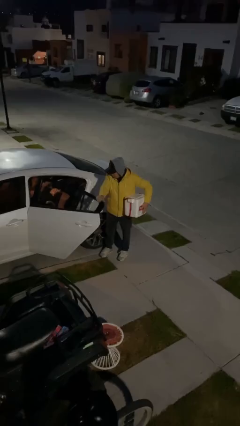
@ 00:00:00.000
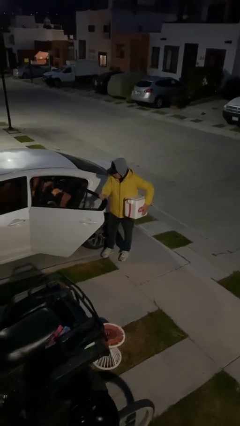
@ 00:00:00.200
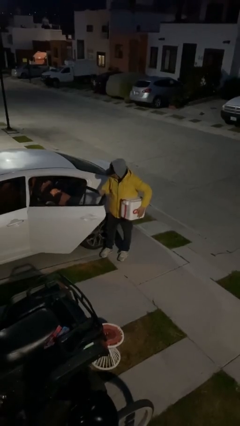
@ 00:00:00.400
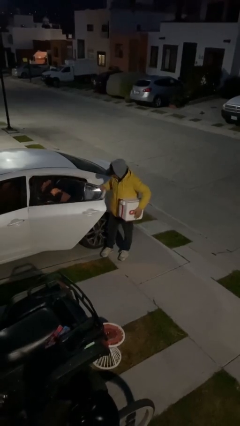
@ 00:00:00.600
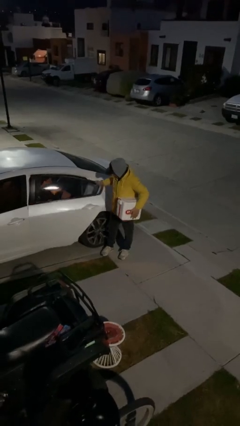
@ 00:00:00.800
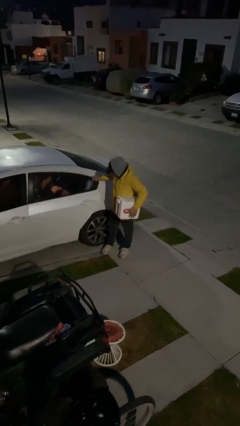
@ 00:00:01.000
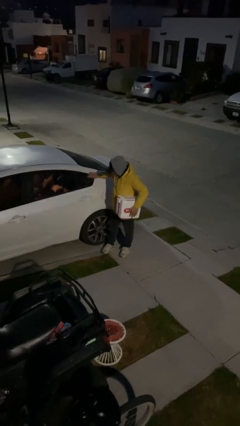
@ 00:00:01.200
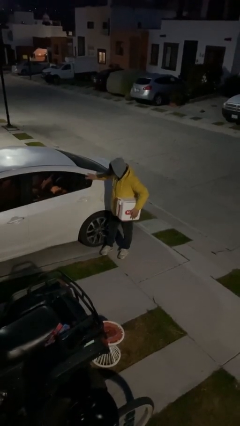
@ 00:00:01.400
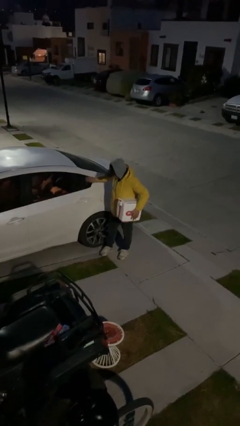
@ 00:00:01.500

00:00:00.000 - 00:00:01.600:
person closes car door

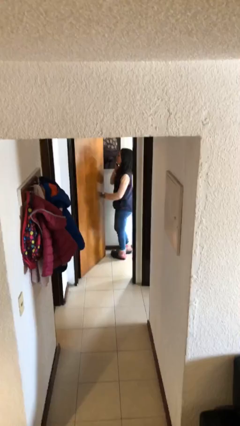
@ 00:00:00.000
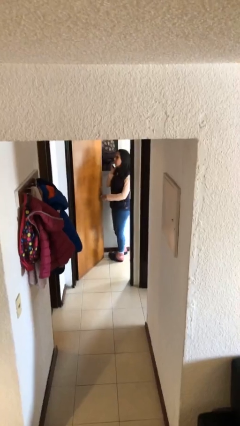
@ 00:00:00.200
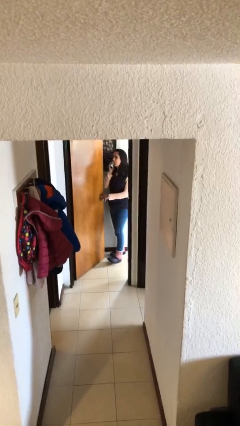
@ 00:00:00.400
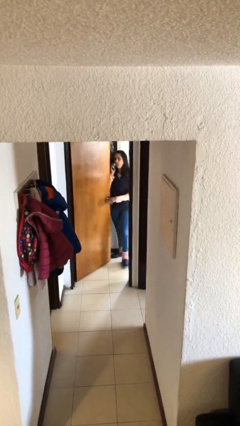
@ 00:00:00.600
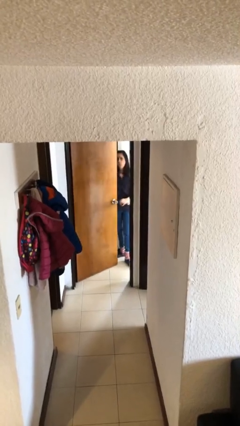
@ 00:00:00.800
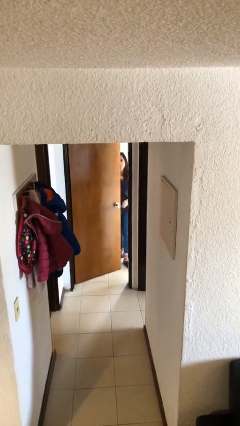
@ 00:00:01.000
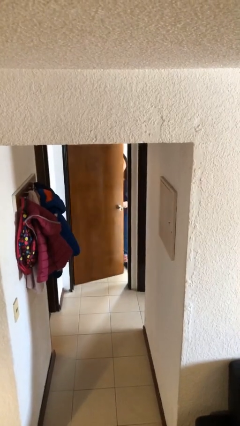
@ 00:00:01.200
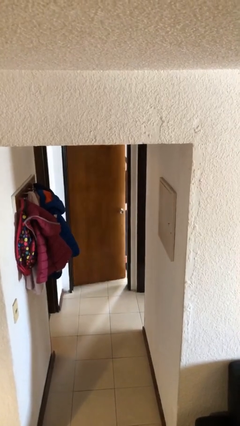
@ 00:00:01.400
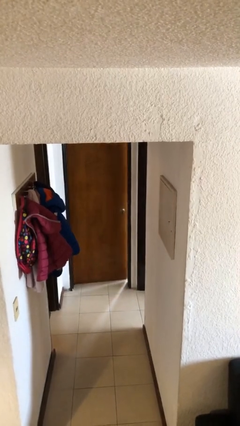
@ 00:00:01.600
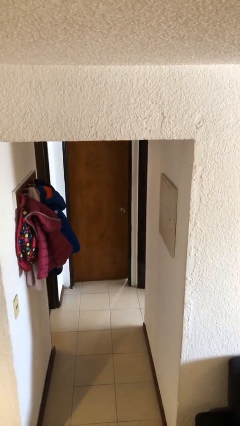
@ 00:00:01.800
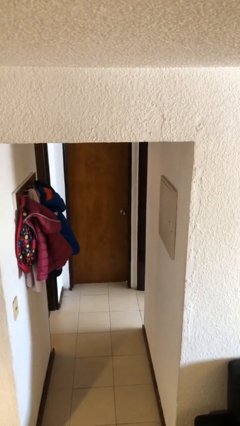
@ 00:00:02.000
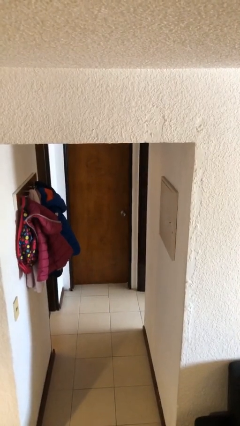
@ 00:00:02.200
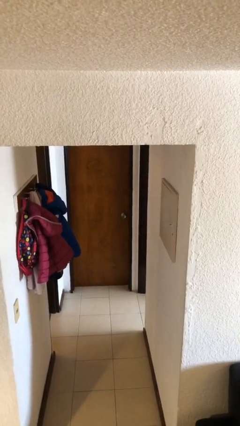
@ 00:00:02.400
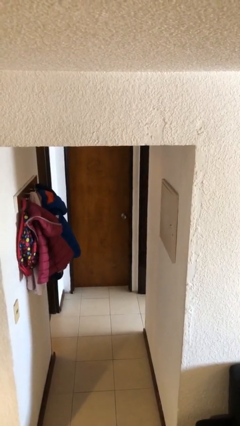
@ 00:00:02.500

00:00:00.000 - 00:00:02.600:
person closes facility door

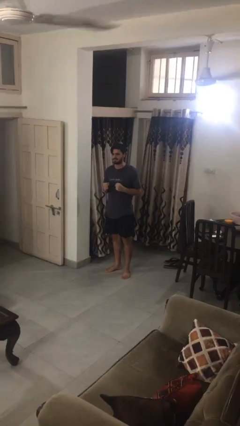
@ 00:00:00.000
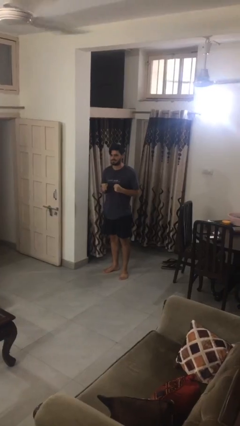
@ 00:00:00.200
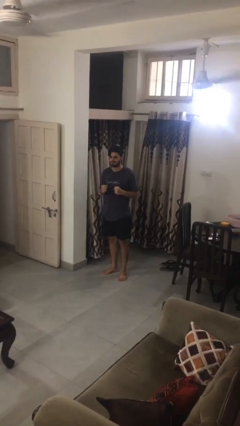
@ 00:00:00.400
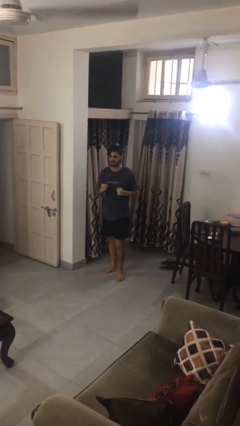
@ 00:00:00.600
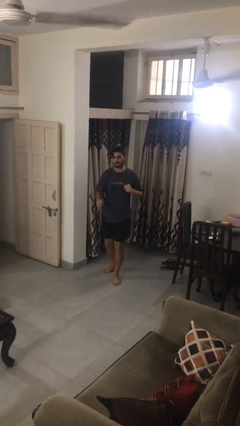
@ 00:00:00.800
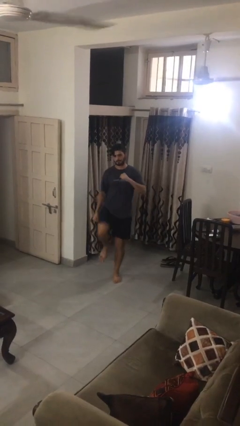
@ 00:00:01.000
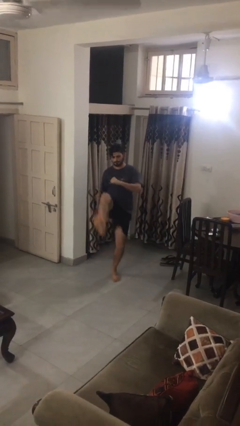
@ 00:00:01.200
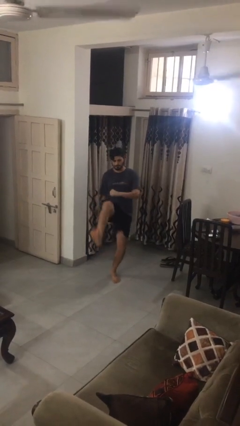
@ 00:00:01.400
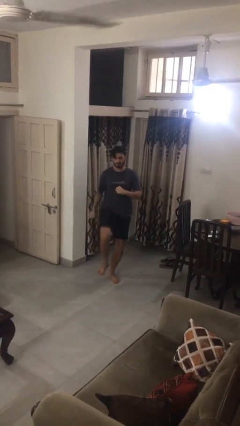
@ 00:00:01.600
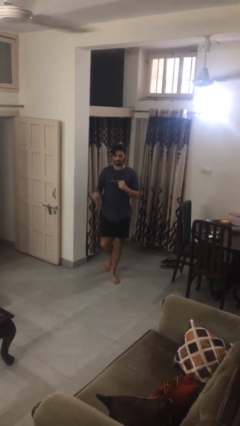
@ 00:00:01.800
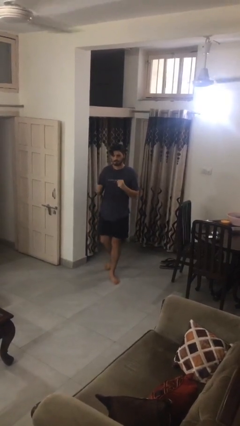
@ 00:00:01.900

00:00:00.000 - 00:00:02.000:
person karate kicks

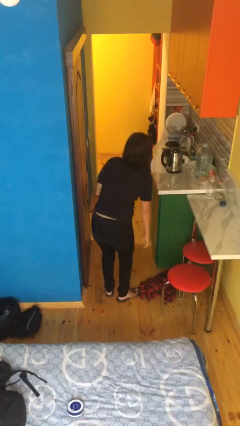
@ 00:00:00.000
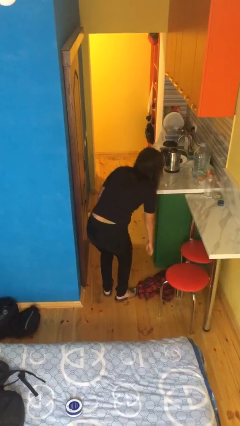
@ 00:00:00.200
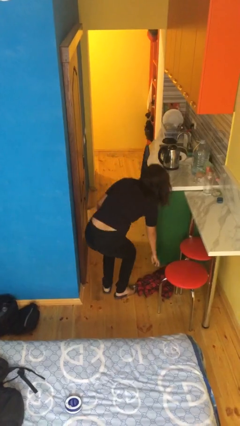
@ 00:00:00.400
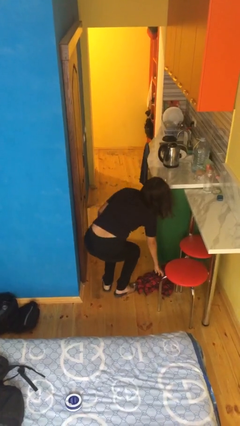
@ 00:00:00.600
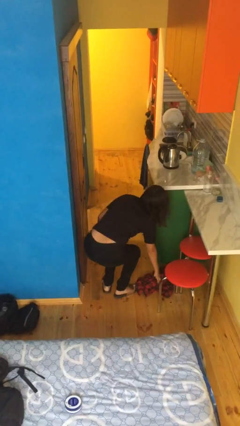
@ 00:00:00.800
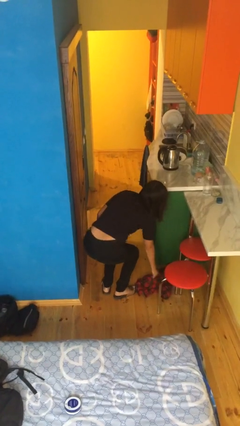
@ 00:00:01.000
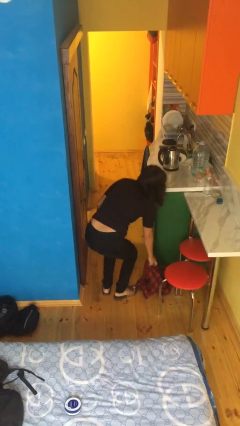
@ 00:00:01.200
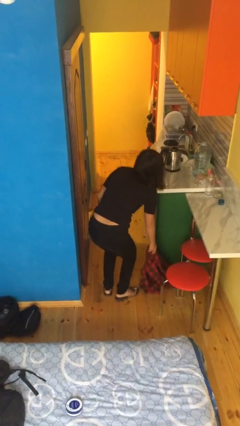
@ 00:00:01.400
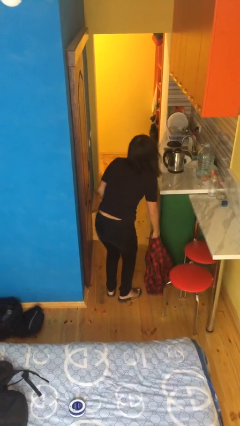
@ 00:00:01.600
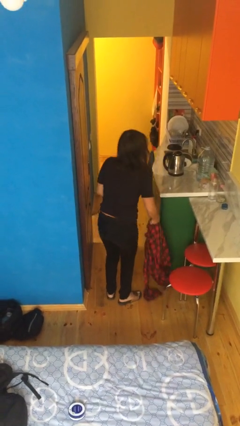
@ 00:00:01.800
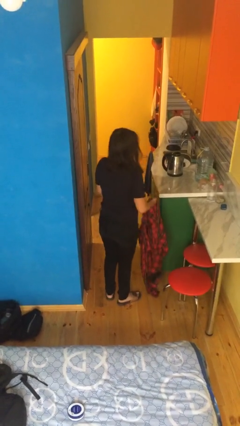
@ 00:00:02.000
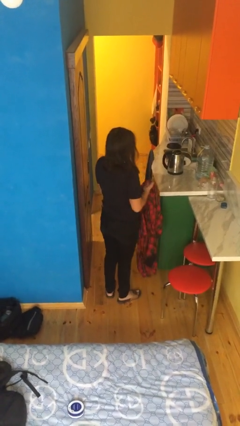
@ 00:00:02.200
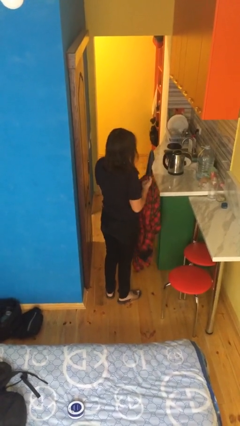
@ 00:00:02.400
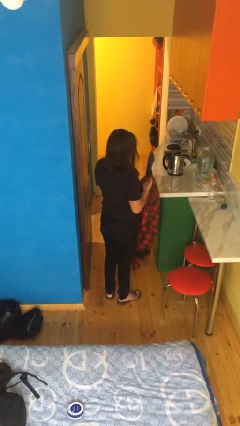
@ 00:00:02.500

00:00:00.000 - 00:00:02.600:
person picks up object from floor

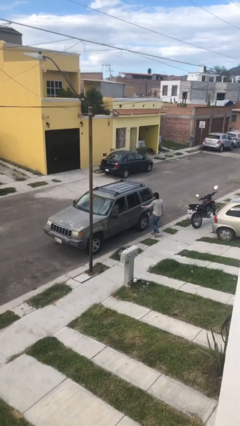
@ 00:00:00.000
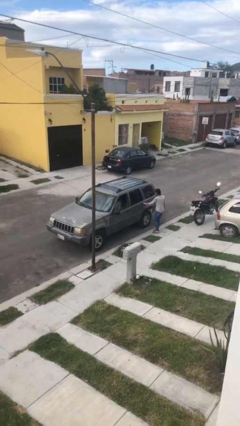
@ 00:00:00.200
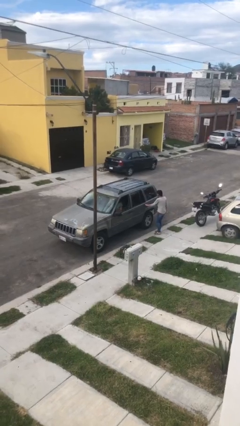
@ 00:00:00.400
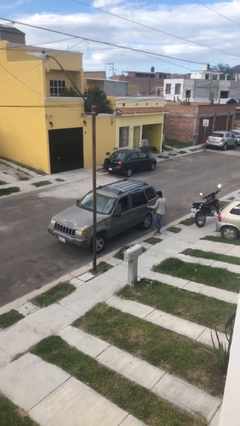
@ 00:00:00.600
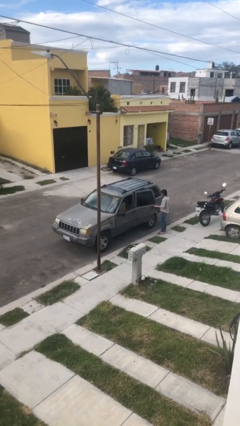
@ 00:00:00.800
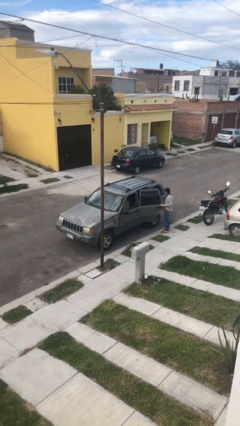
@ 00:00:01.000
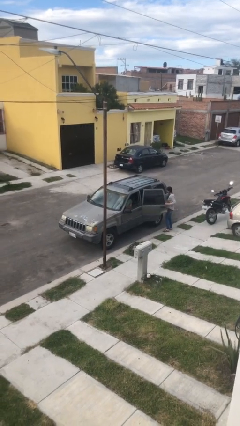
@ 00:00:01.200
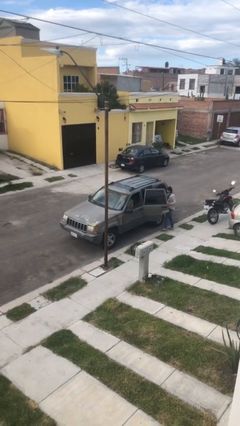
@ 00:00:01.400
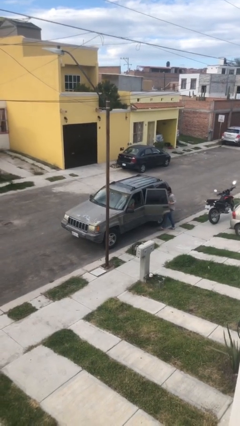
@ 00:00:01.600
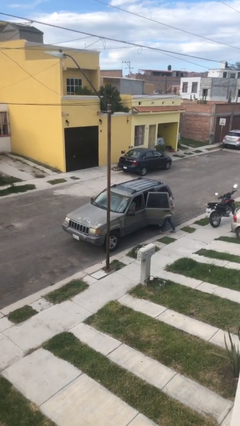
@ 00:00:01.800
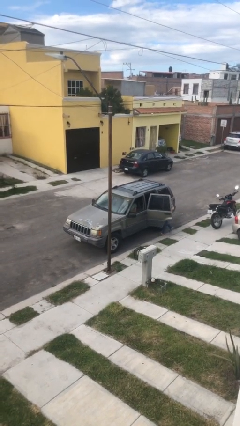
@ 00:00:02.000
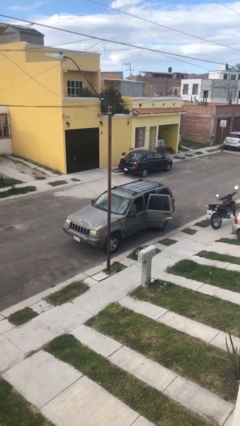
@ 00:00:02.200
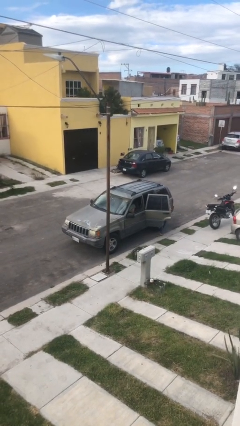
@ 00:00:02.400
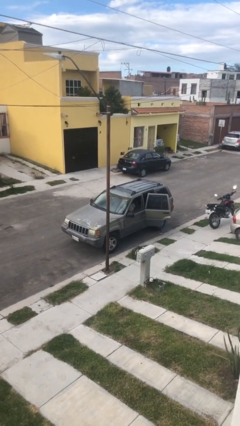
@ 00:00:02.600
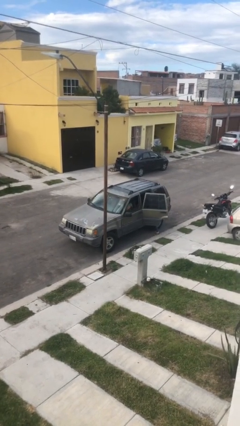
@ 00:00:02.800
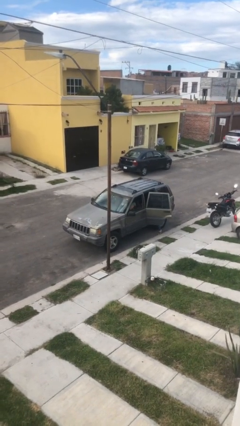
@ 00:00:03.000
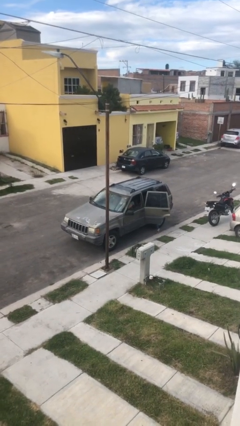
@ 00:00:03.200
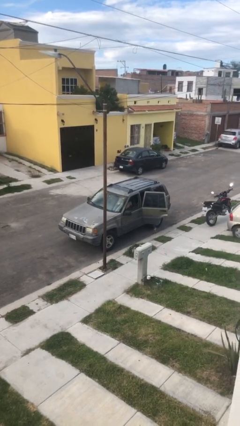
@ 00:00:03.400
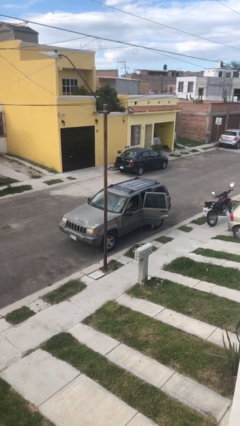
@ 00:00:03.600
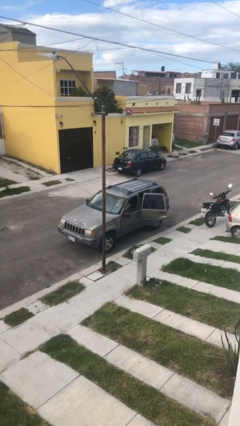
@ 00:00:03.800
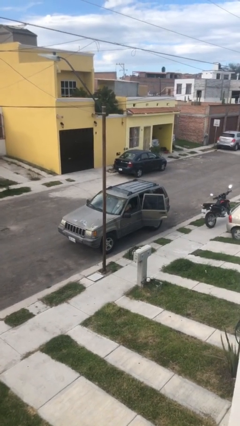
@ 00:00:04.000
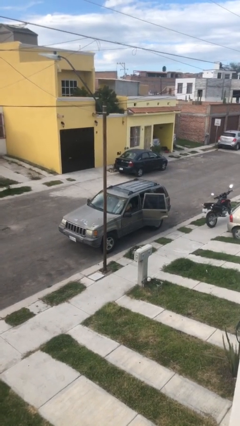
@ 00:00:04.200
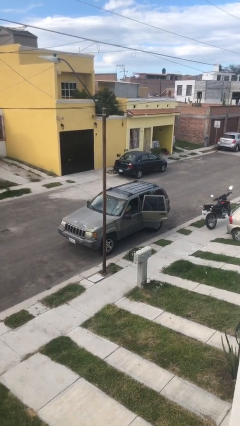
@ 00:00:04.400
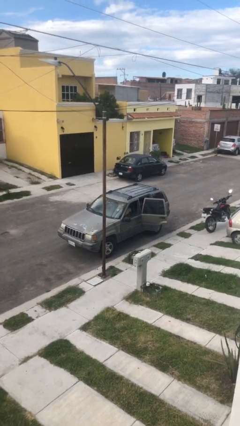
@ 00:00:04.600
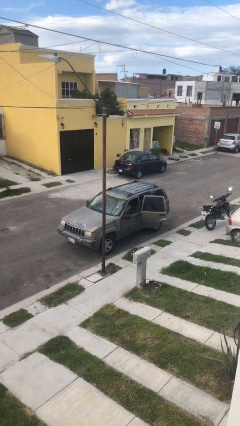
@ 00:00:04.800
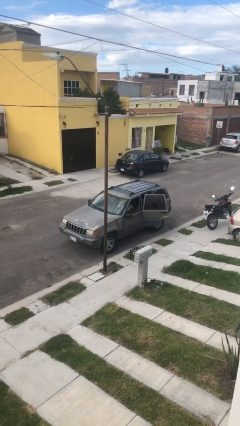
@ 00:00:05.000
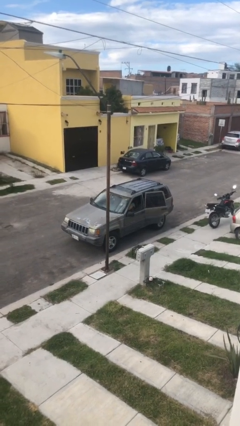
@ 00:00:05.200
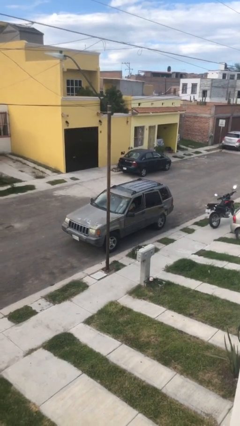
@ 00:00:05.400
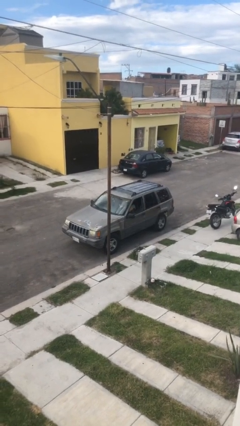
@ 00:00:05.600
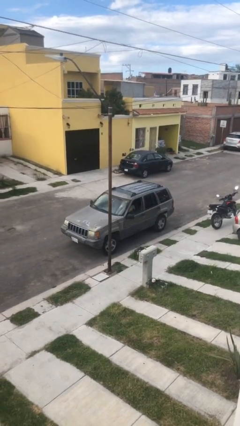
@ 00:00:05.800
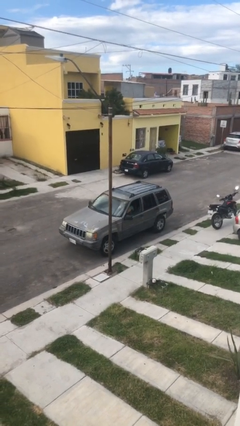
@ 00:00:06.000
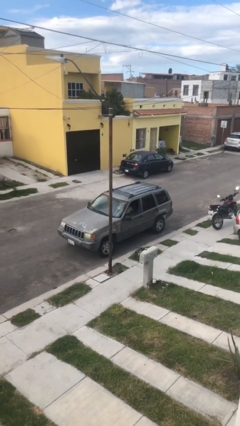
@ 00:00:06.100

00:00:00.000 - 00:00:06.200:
car picks up person

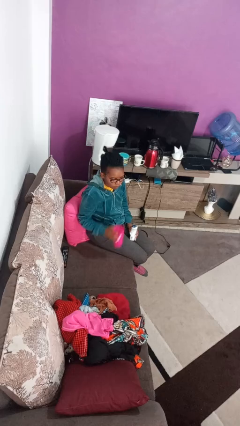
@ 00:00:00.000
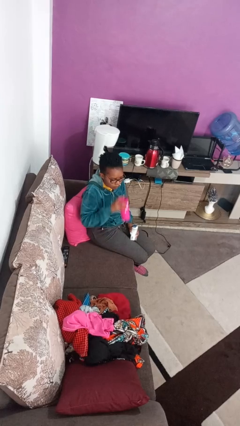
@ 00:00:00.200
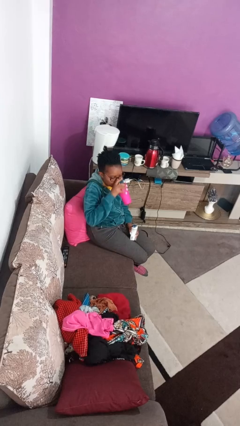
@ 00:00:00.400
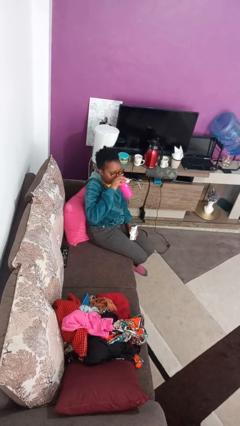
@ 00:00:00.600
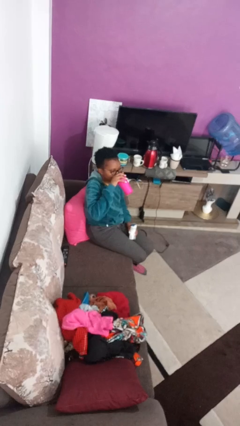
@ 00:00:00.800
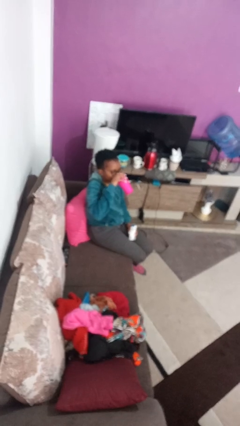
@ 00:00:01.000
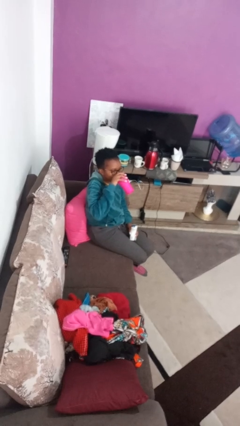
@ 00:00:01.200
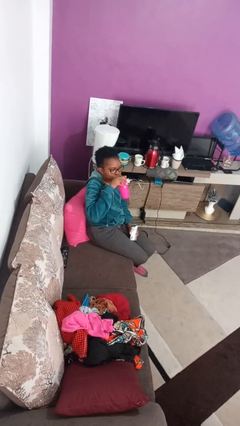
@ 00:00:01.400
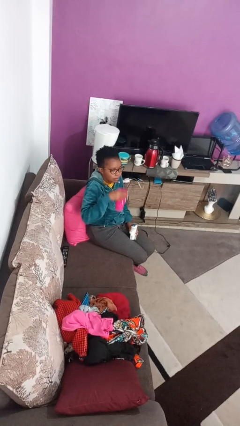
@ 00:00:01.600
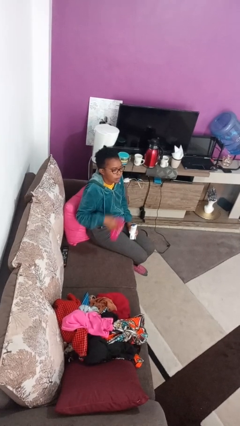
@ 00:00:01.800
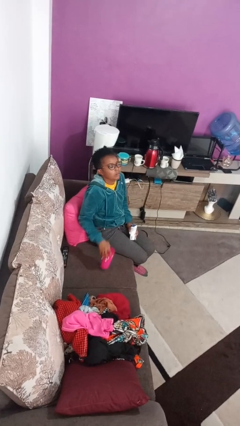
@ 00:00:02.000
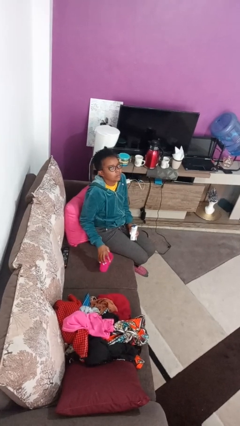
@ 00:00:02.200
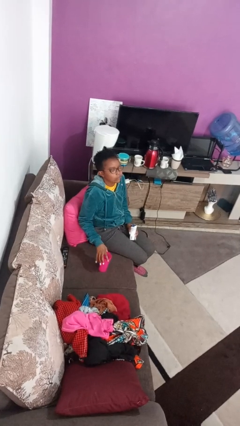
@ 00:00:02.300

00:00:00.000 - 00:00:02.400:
person drinks from cup
